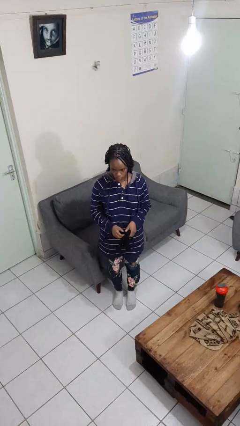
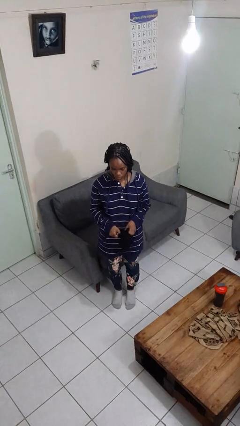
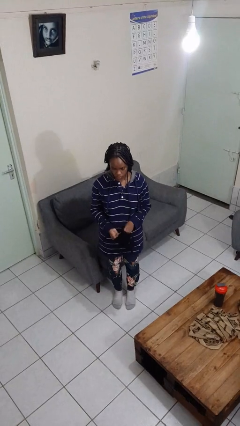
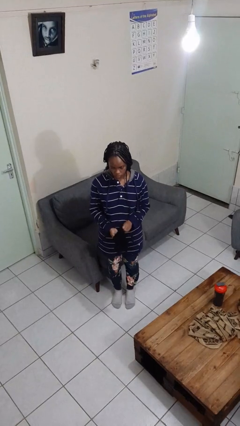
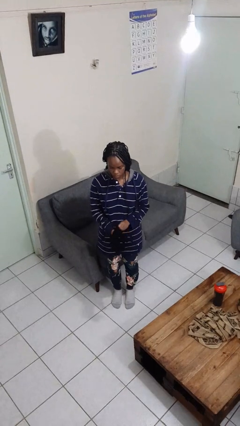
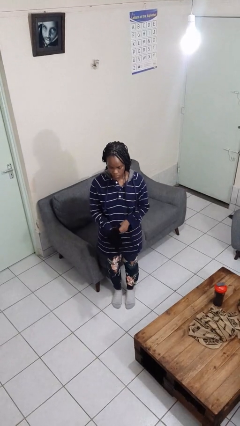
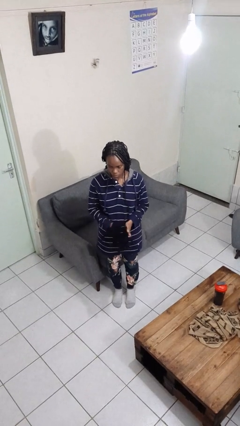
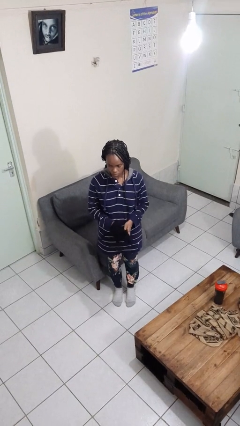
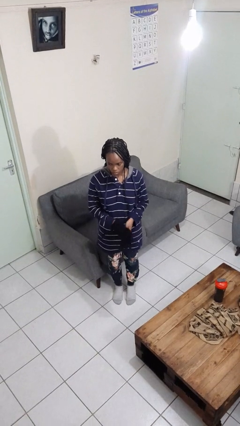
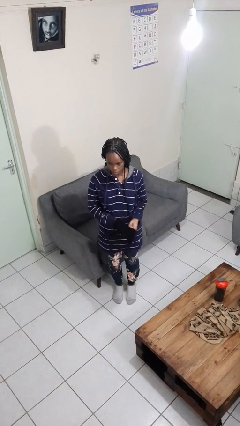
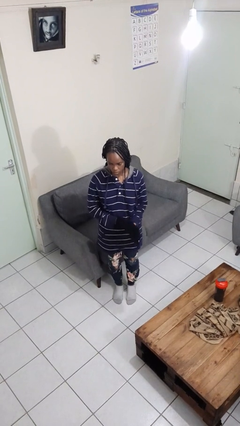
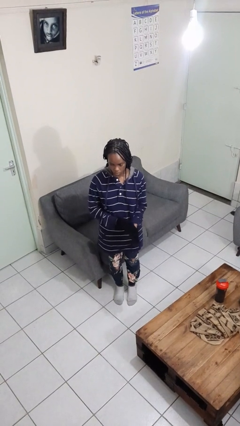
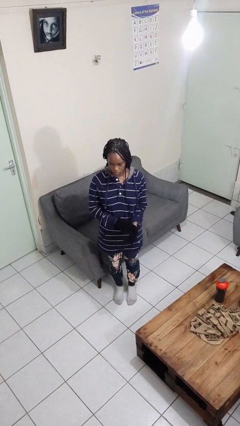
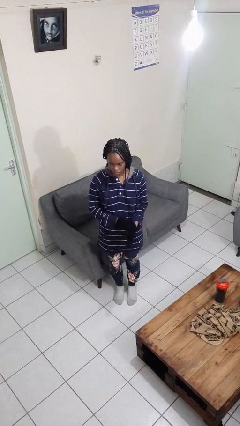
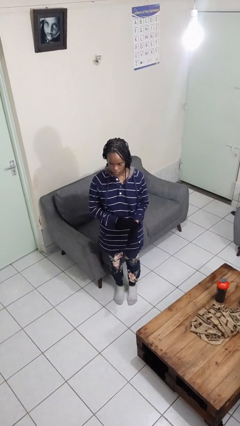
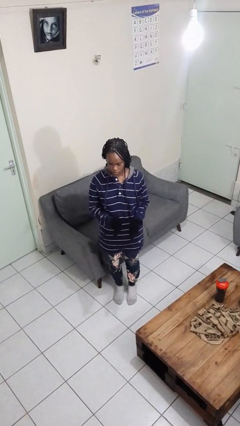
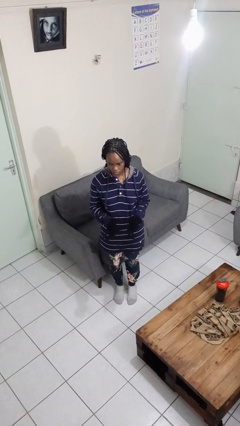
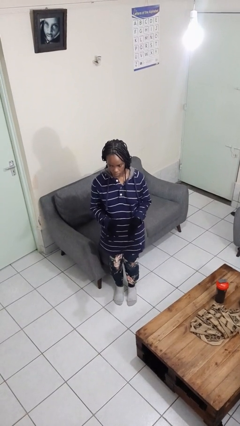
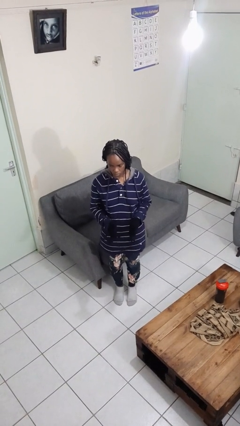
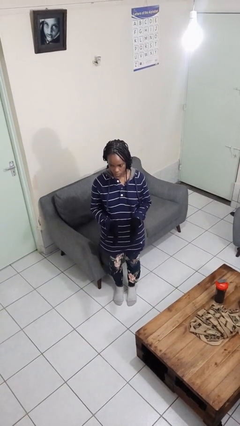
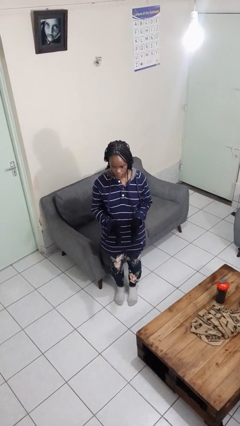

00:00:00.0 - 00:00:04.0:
person puts on gloves

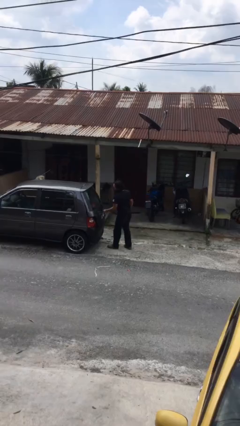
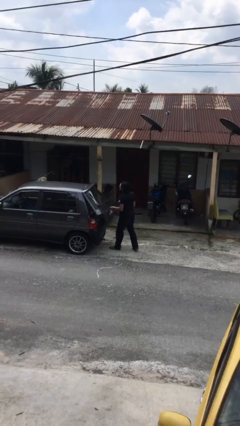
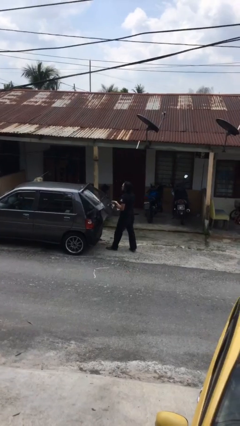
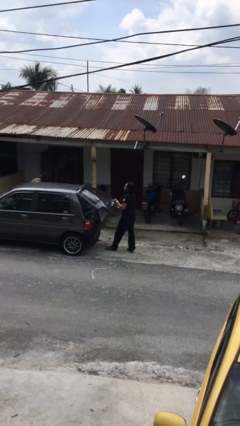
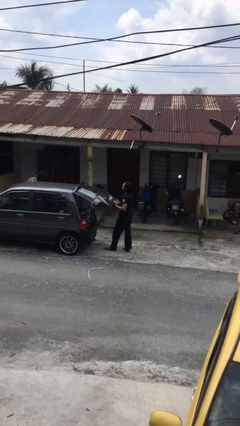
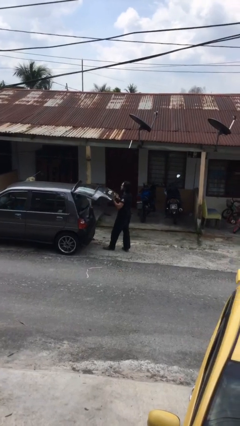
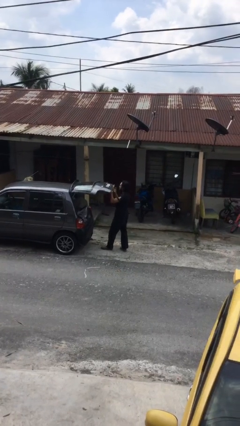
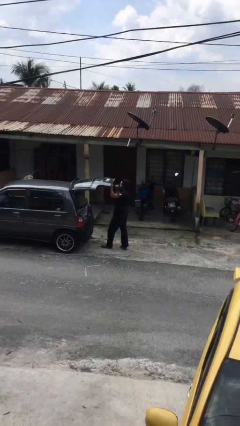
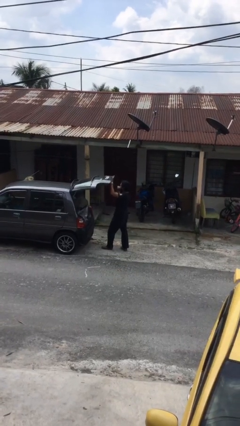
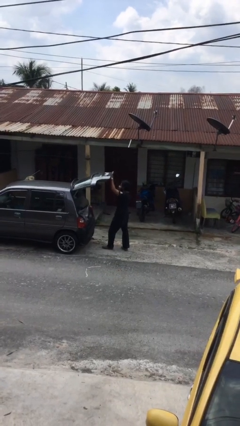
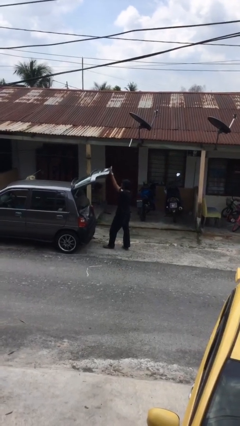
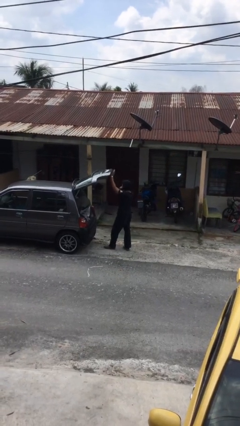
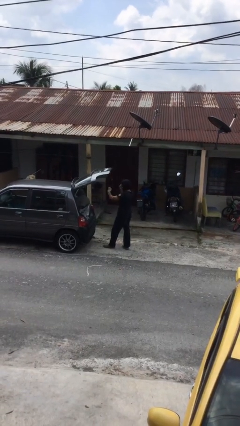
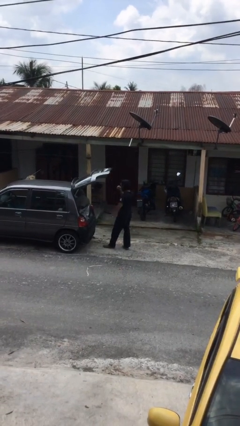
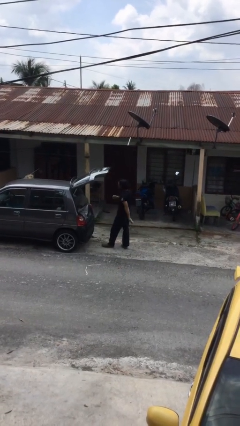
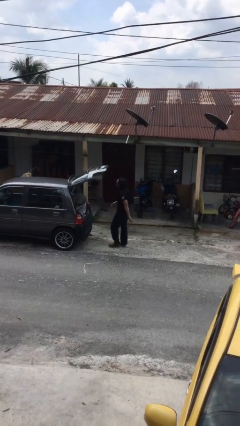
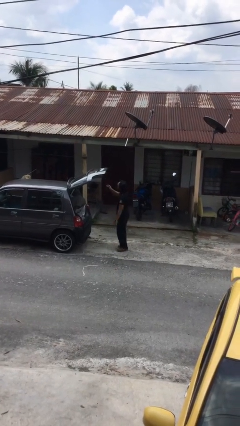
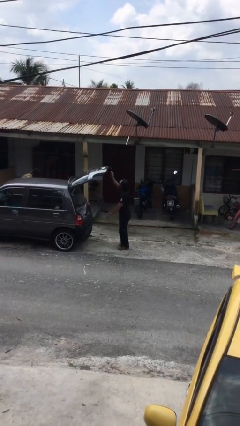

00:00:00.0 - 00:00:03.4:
person opens car trunk

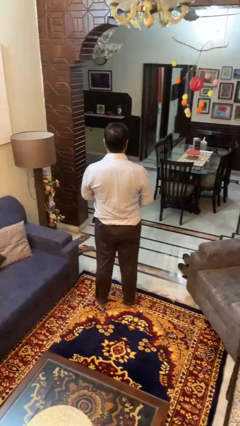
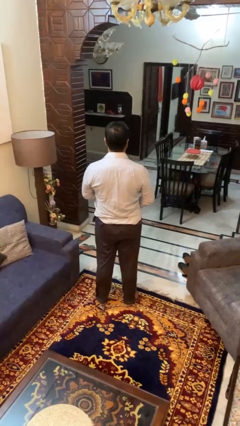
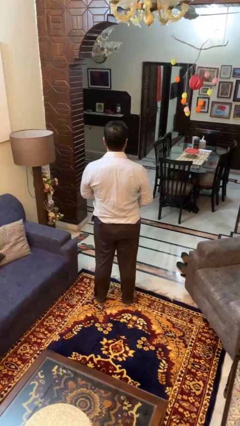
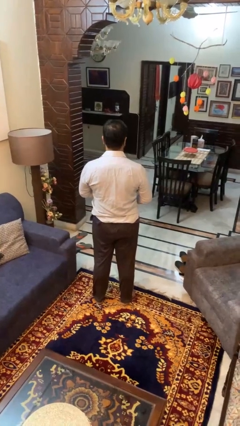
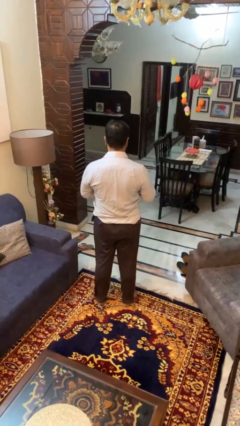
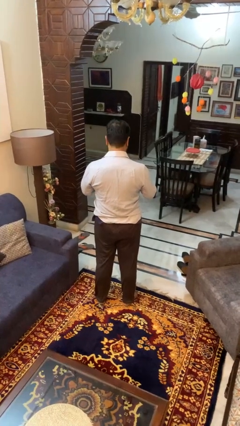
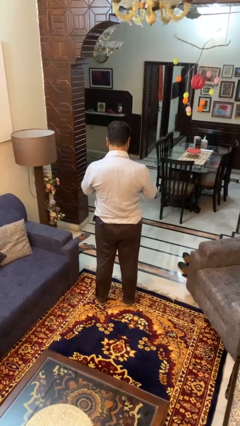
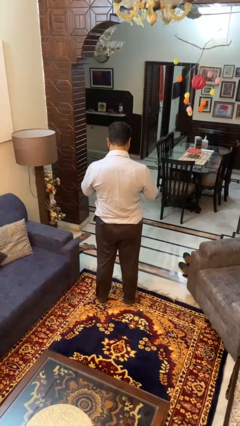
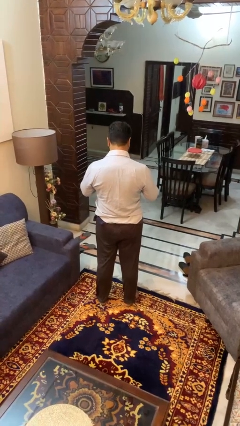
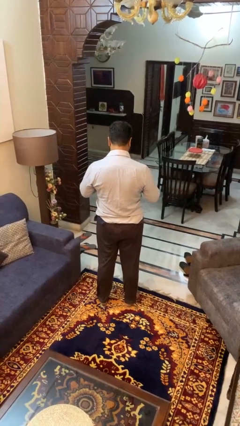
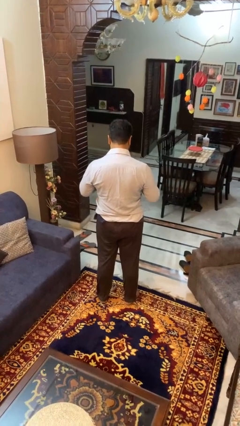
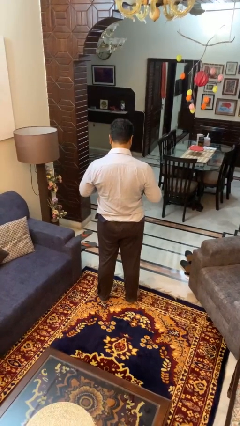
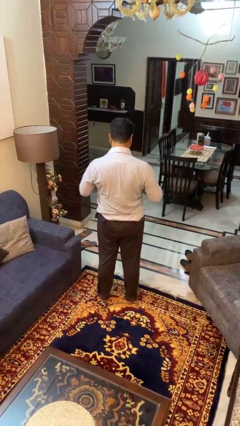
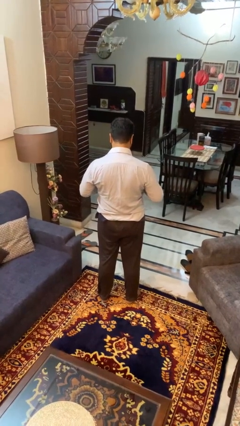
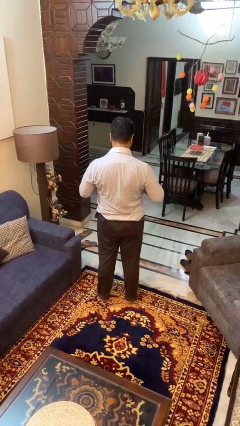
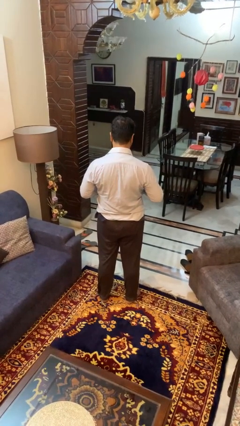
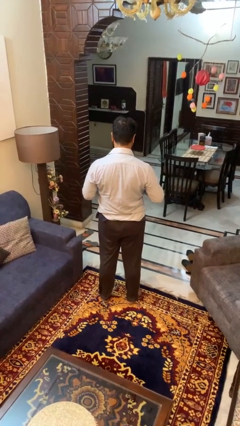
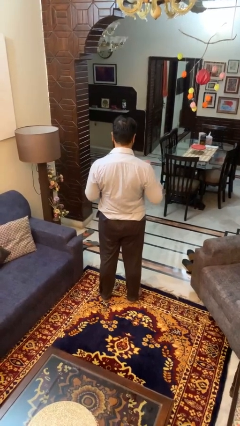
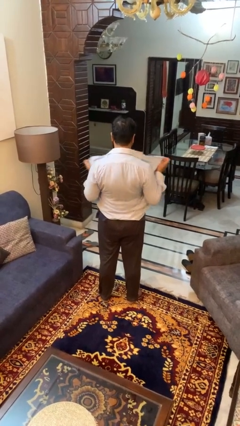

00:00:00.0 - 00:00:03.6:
person unbuttons shirt

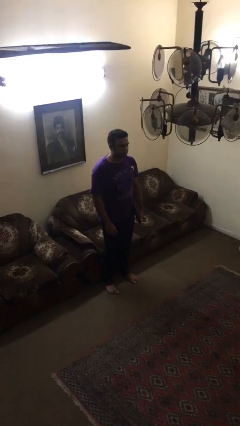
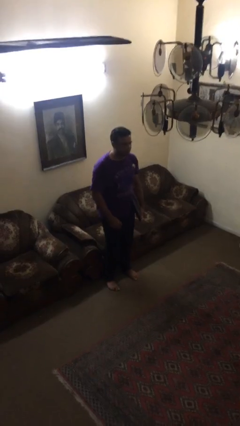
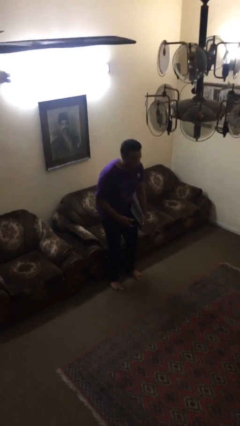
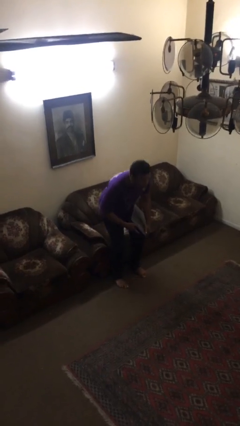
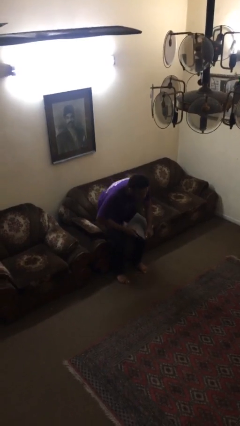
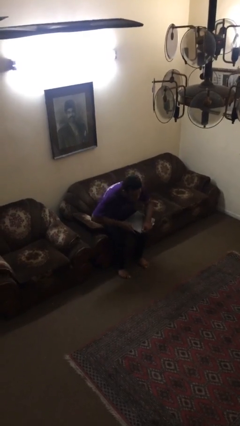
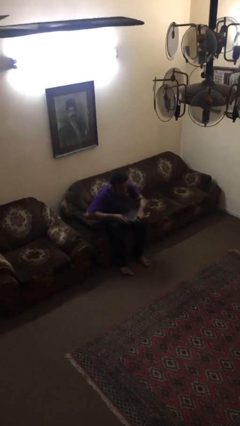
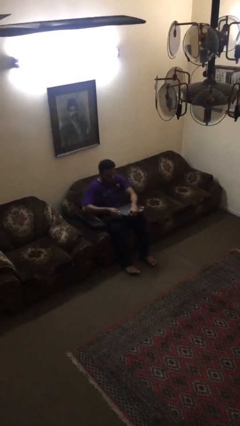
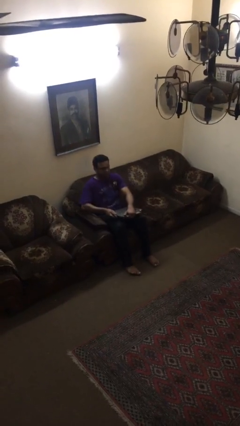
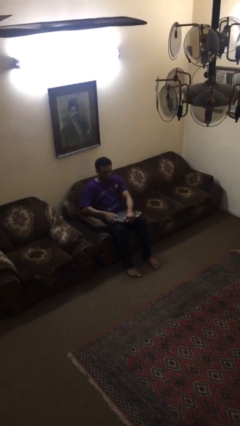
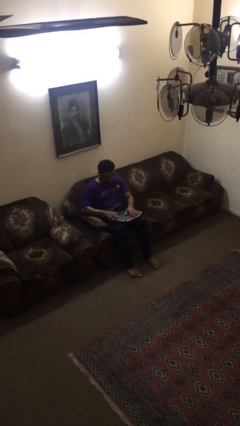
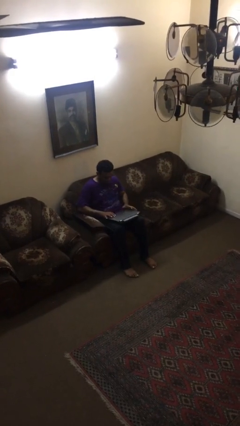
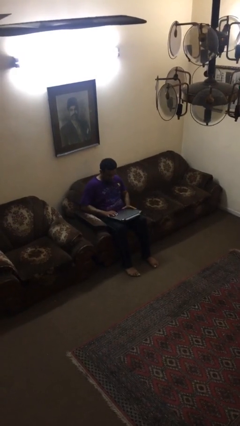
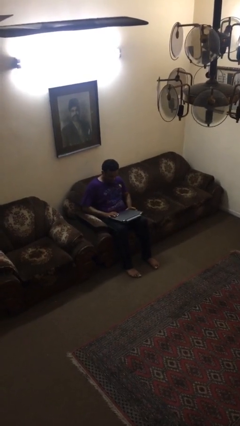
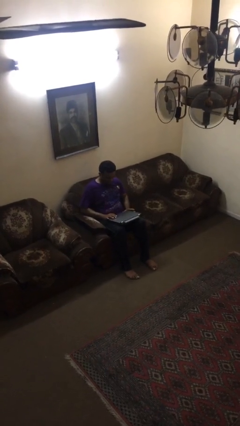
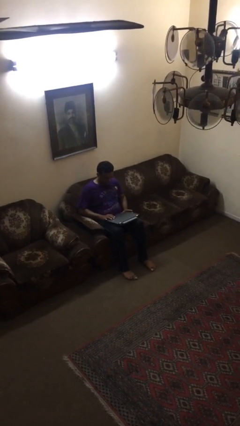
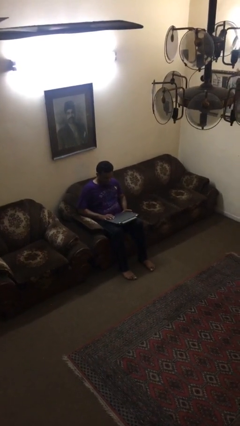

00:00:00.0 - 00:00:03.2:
person sits down

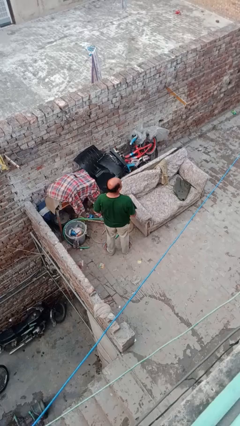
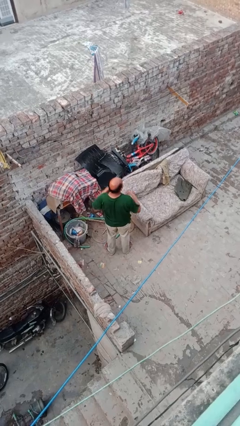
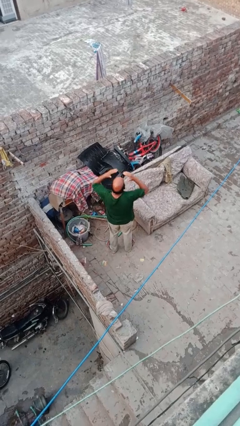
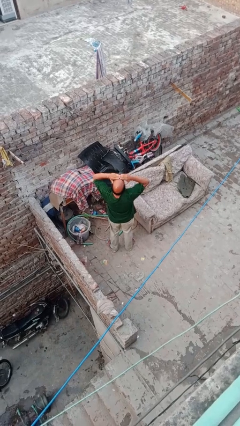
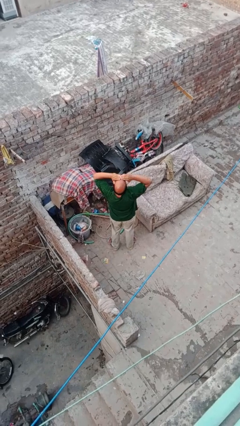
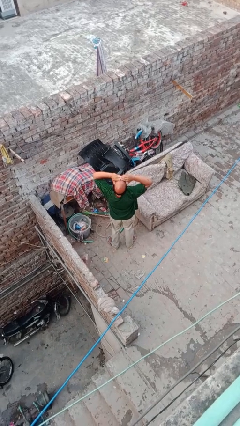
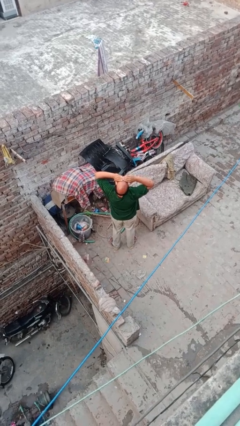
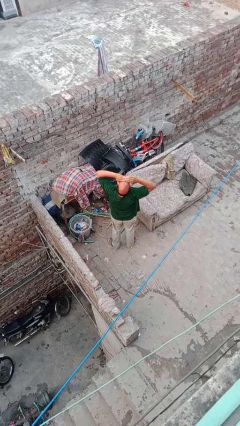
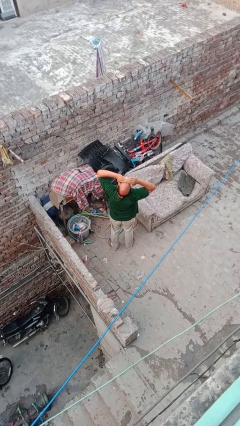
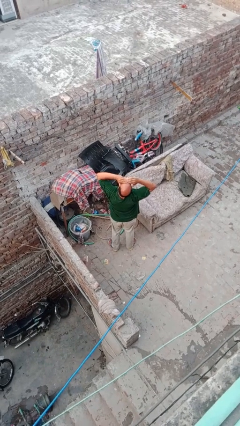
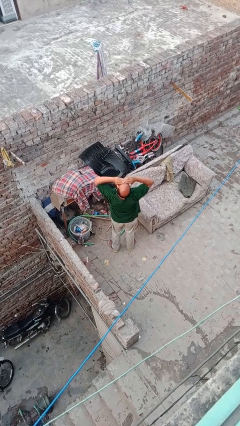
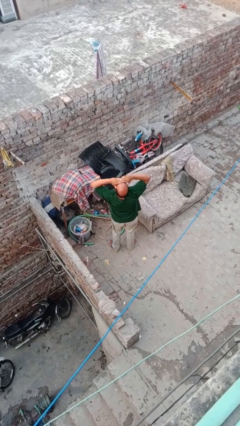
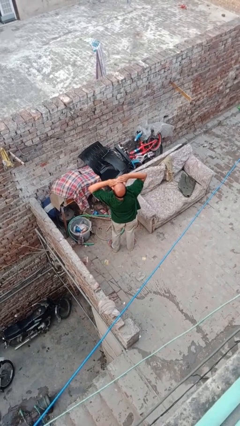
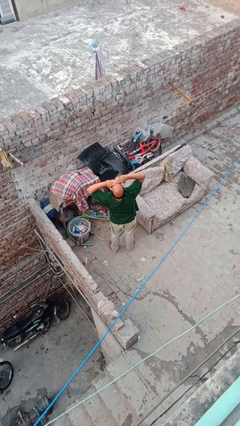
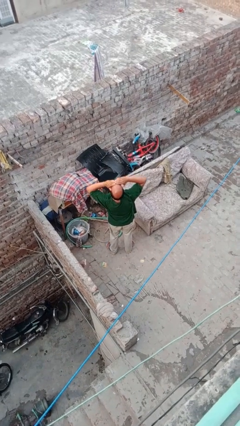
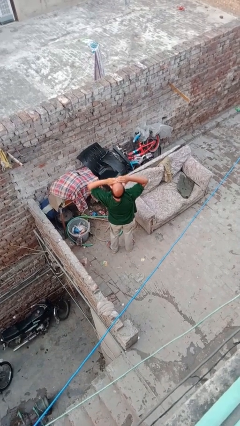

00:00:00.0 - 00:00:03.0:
person shades eyes
